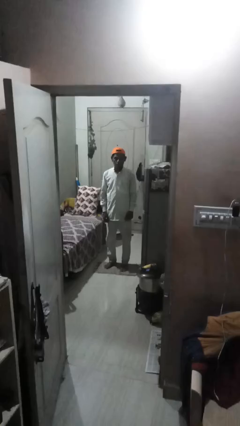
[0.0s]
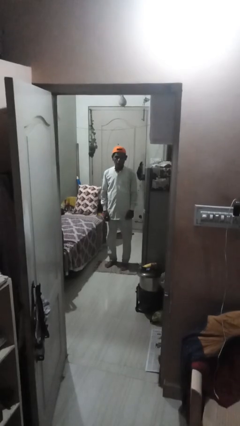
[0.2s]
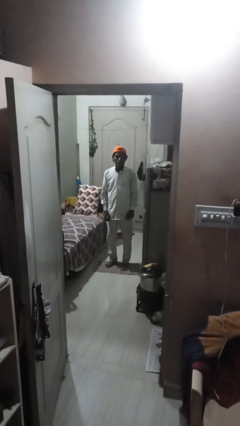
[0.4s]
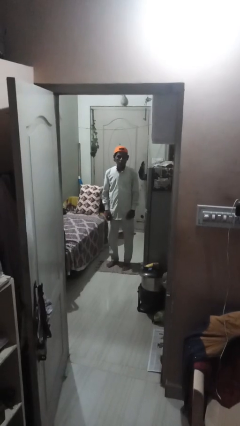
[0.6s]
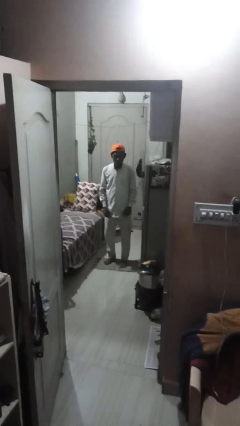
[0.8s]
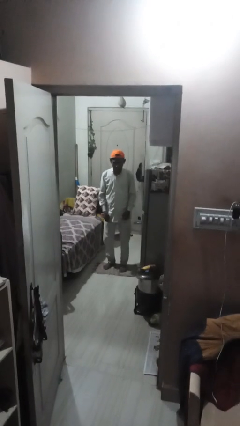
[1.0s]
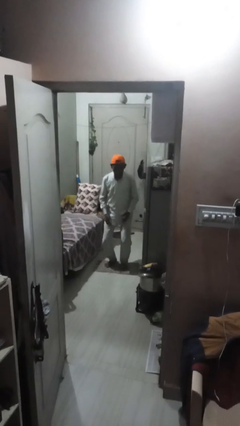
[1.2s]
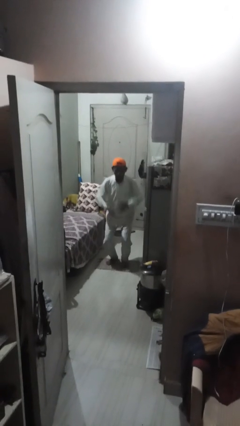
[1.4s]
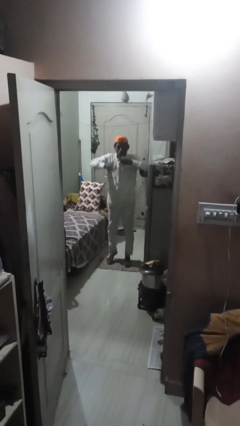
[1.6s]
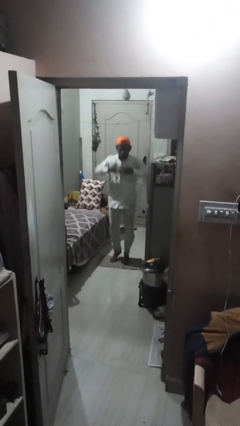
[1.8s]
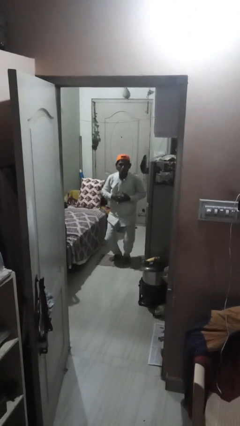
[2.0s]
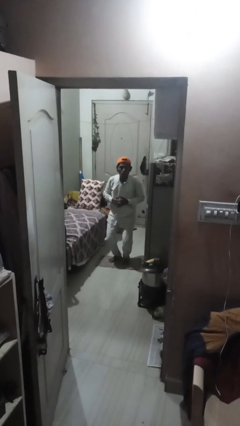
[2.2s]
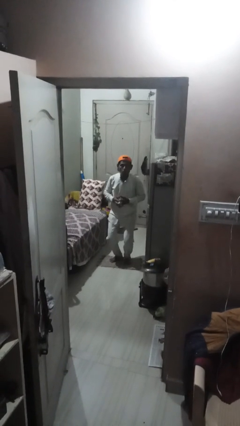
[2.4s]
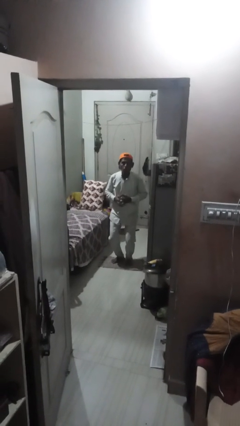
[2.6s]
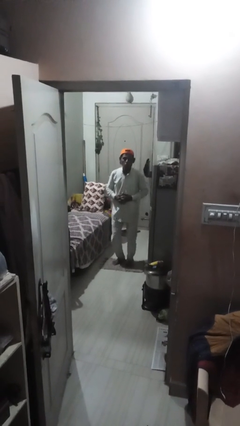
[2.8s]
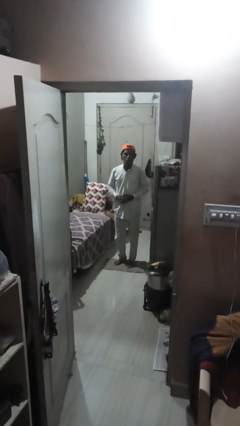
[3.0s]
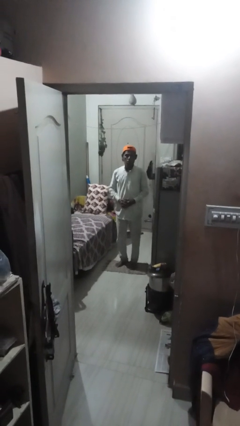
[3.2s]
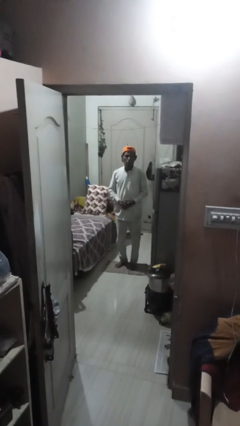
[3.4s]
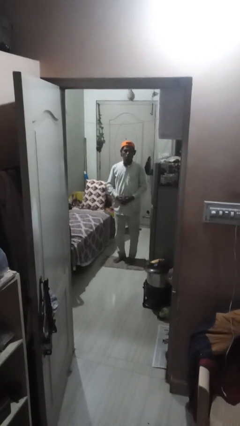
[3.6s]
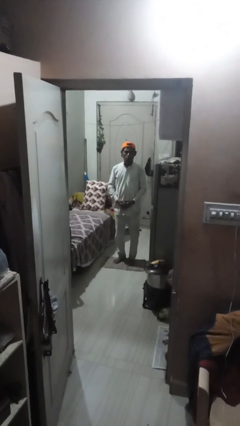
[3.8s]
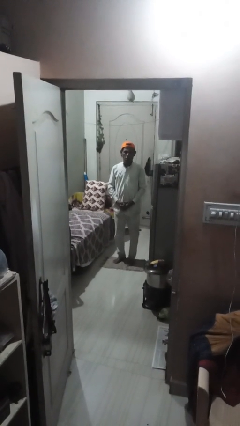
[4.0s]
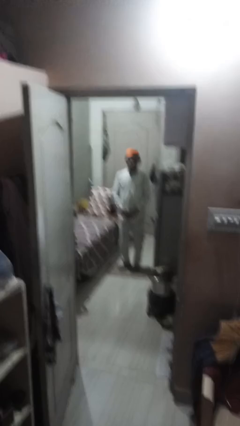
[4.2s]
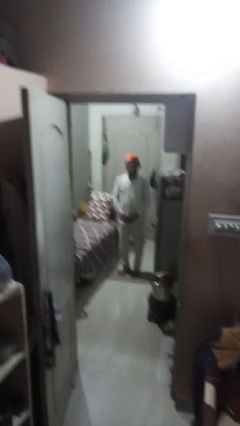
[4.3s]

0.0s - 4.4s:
person jumps

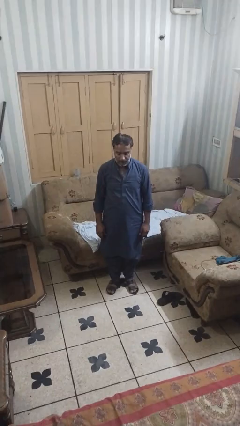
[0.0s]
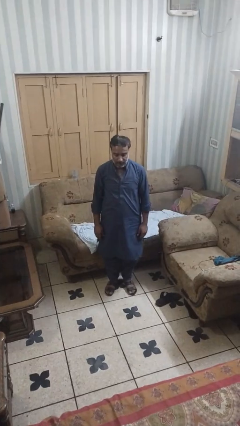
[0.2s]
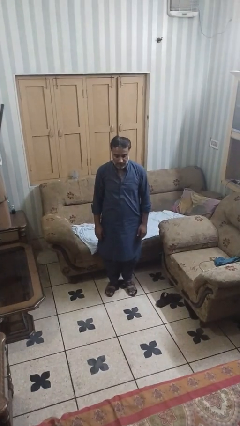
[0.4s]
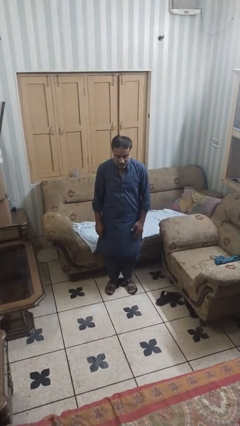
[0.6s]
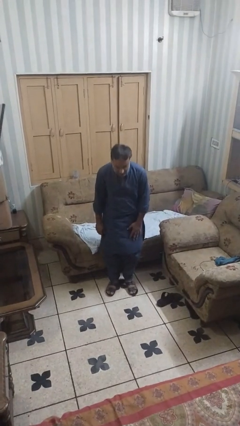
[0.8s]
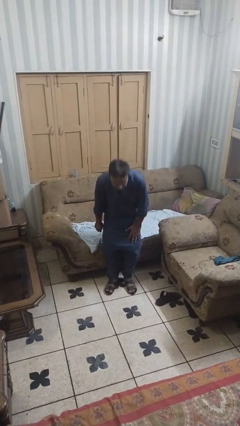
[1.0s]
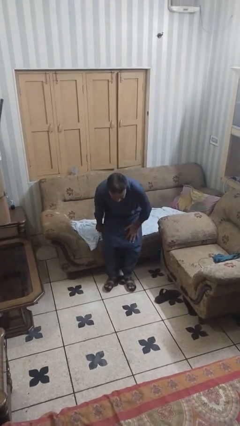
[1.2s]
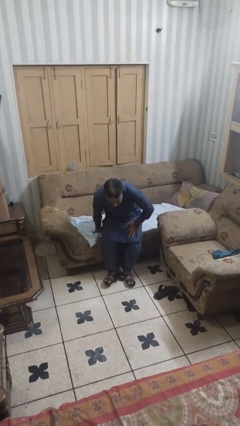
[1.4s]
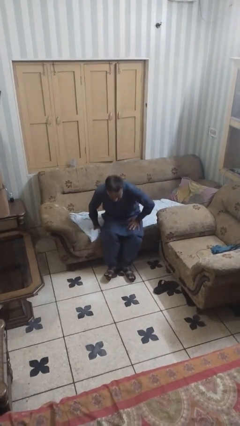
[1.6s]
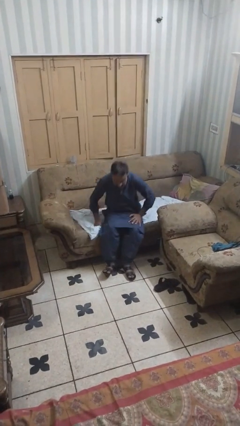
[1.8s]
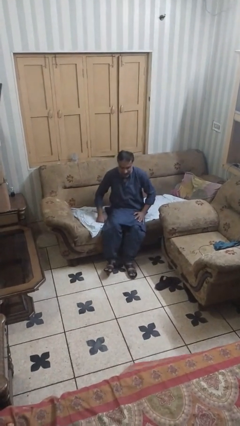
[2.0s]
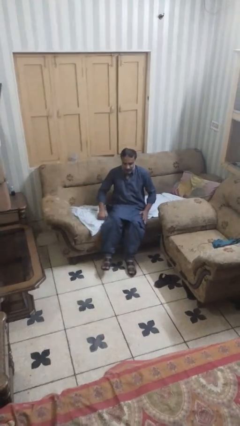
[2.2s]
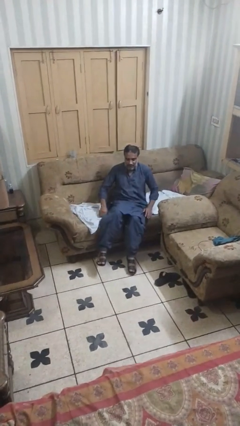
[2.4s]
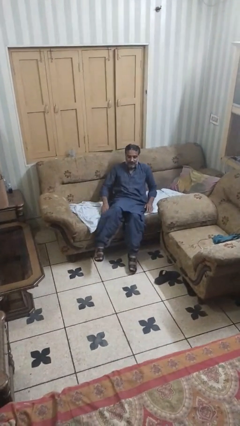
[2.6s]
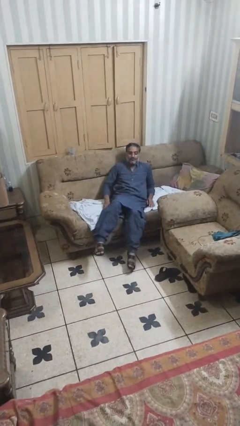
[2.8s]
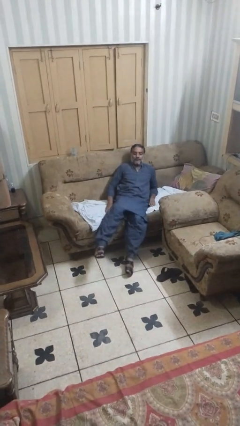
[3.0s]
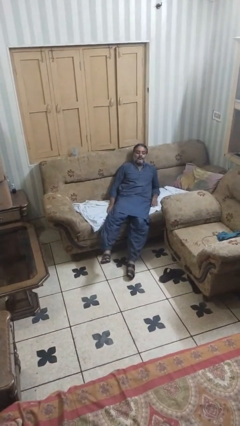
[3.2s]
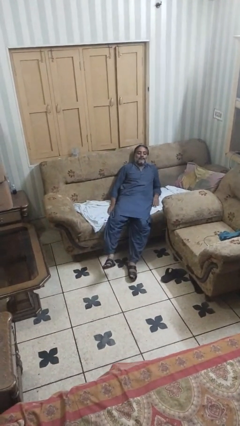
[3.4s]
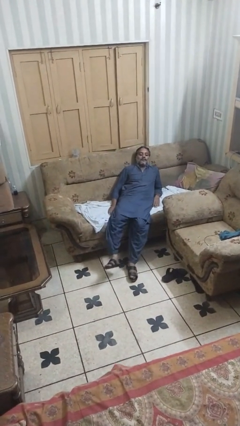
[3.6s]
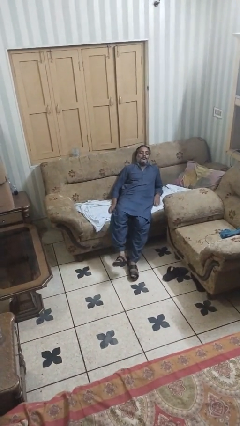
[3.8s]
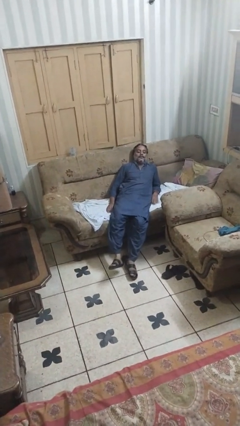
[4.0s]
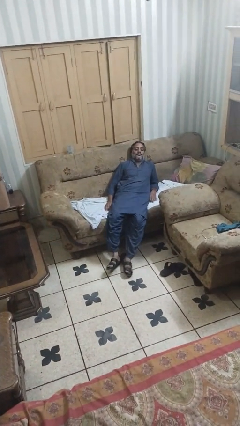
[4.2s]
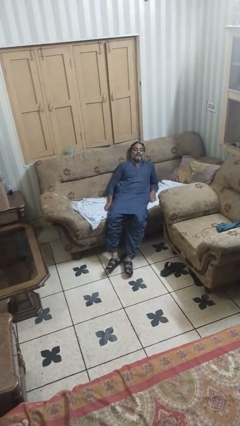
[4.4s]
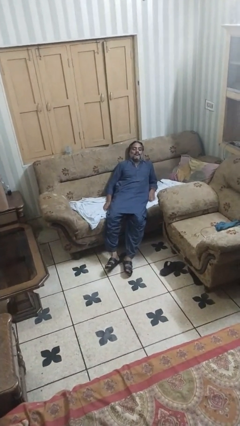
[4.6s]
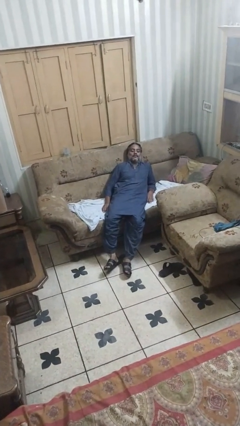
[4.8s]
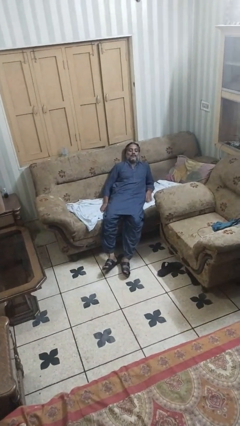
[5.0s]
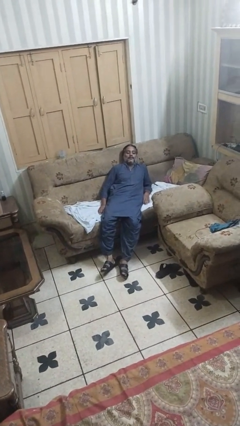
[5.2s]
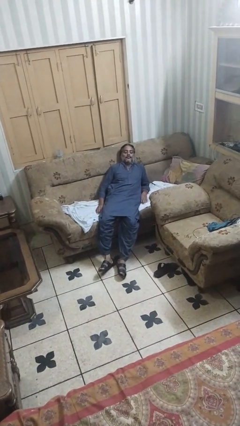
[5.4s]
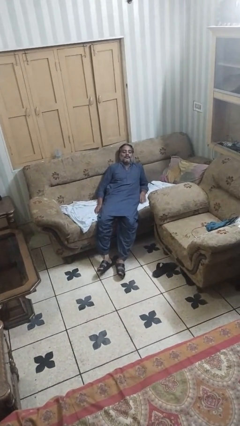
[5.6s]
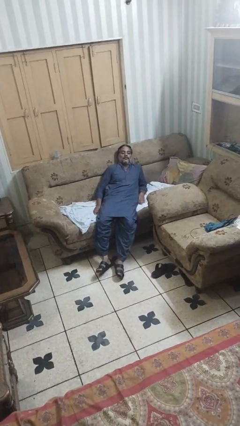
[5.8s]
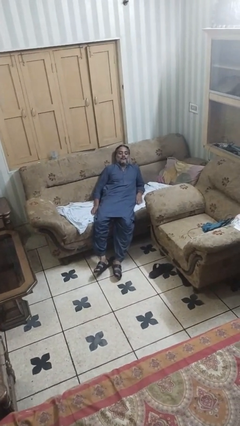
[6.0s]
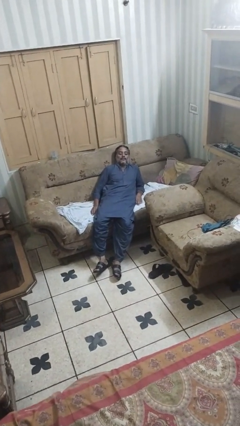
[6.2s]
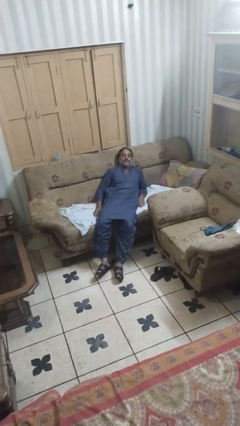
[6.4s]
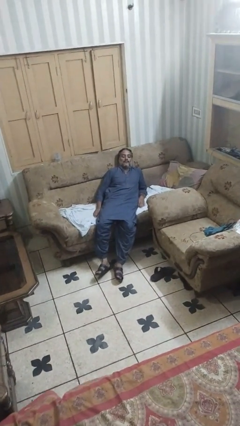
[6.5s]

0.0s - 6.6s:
person lies down on couch

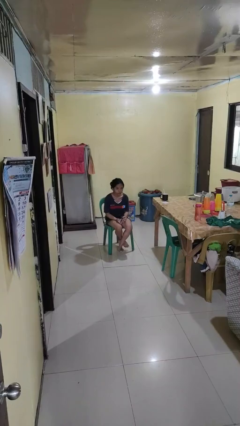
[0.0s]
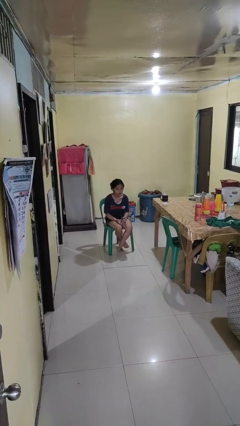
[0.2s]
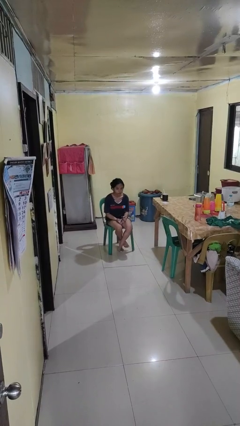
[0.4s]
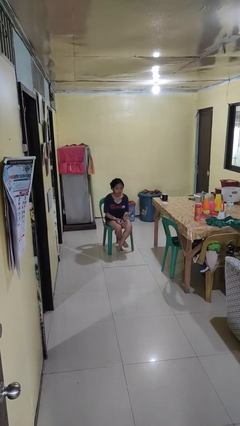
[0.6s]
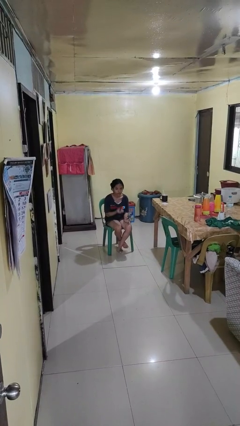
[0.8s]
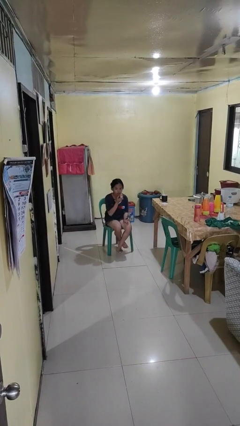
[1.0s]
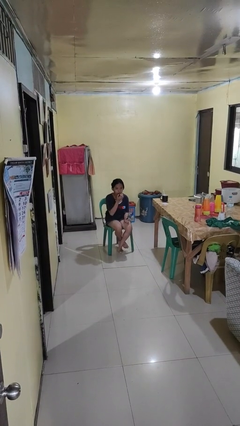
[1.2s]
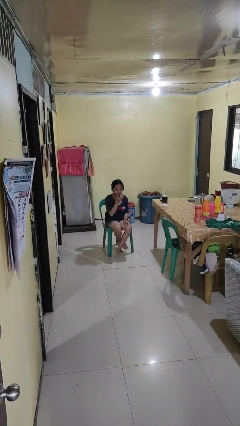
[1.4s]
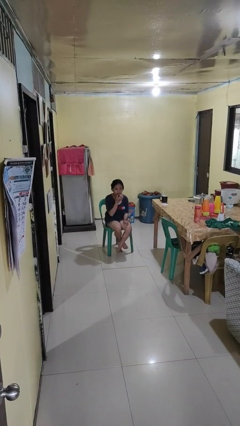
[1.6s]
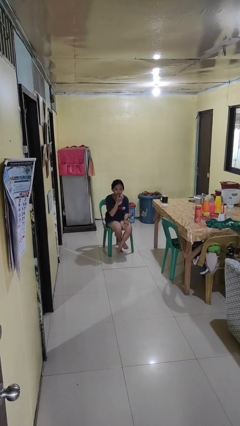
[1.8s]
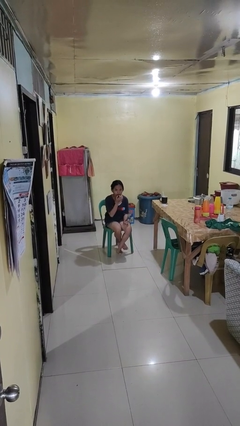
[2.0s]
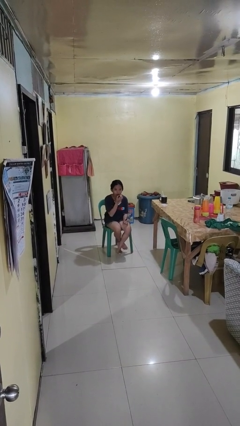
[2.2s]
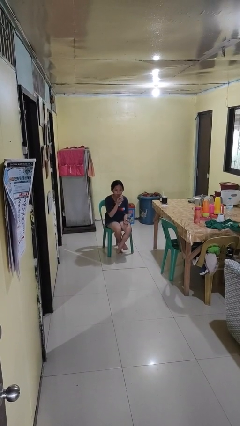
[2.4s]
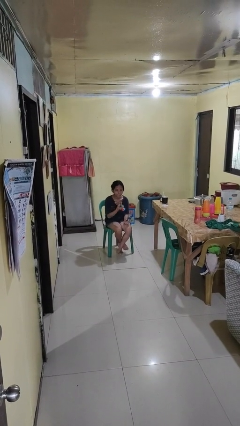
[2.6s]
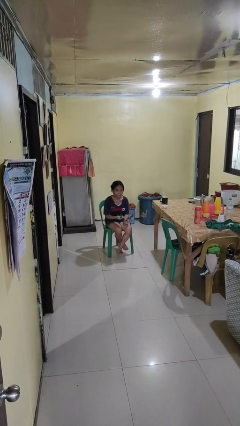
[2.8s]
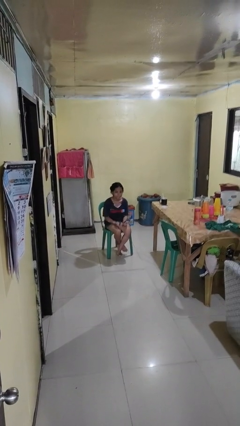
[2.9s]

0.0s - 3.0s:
person applies lip makeup

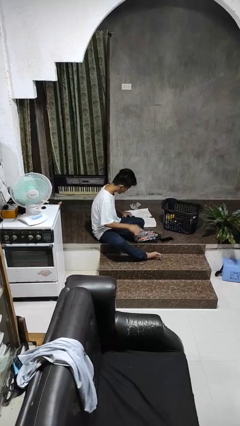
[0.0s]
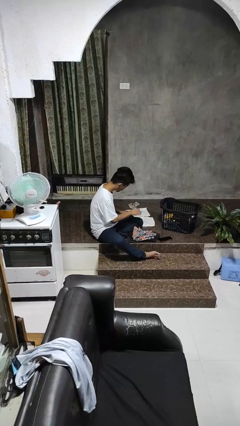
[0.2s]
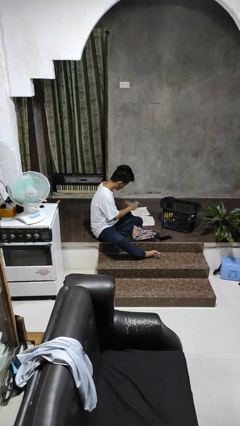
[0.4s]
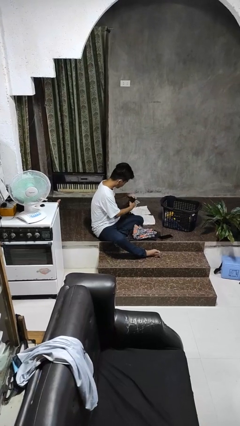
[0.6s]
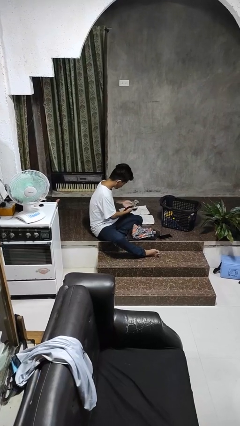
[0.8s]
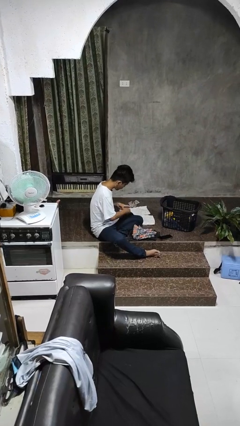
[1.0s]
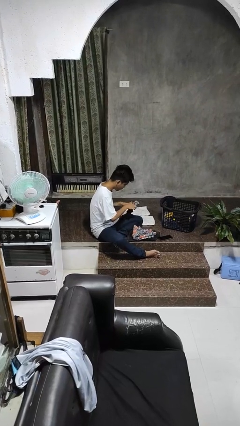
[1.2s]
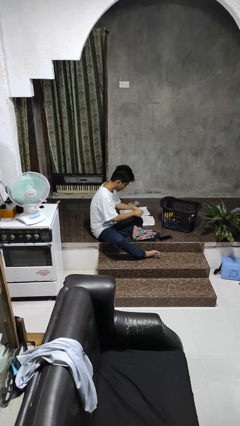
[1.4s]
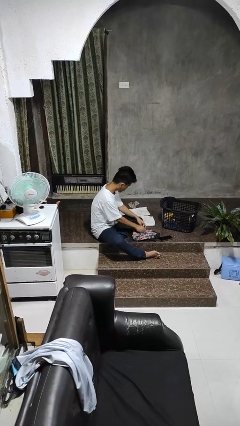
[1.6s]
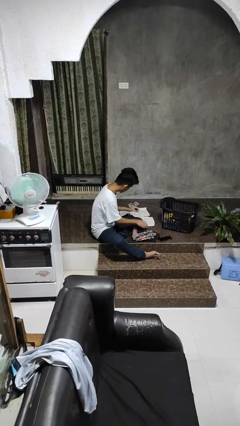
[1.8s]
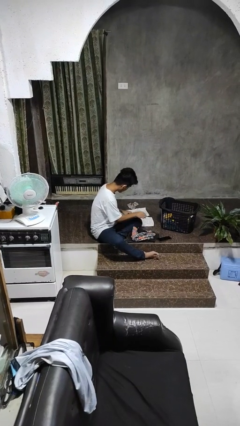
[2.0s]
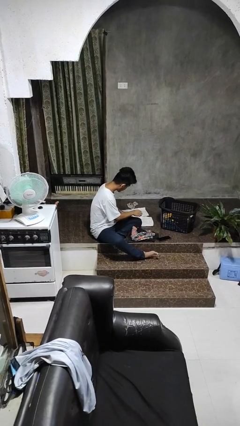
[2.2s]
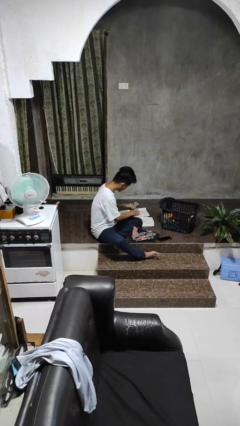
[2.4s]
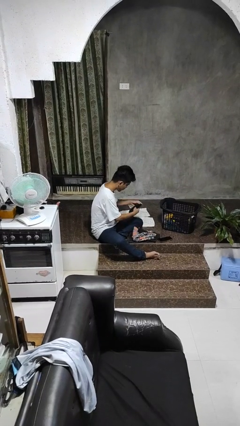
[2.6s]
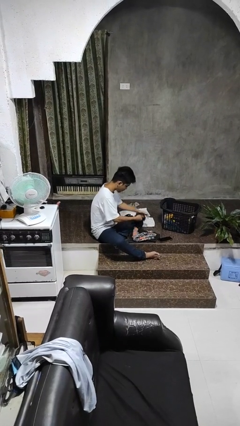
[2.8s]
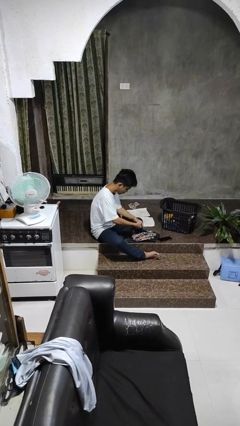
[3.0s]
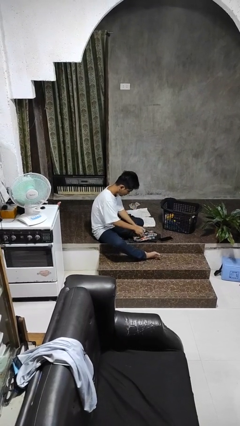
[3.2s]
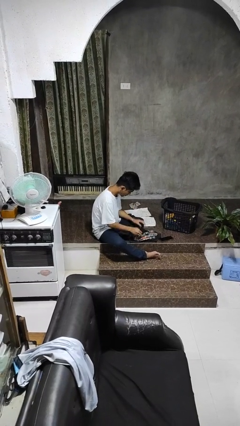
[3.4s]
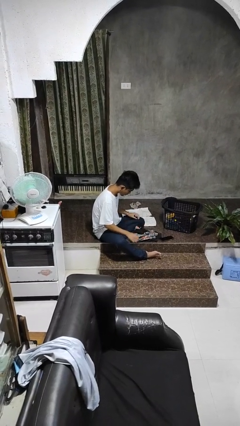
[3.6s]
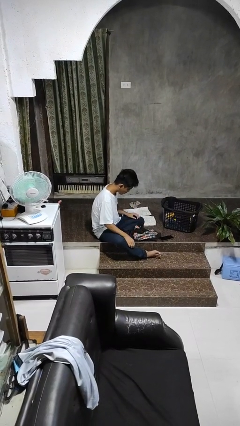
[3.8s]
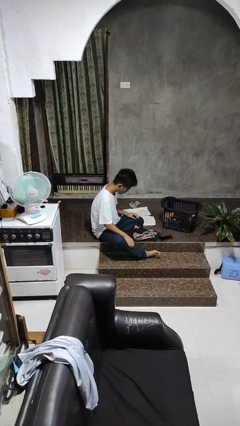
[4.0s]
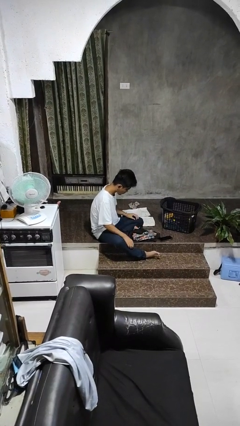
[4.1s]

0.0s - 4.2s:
person folds socks
